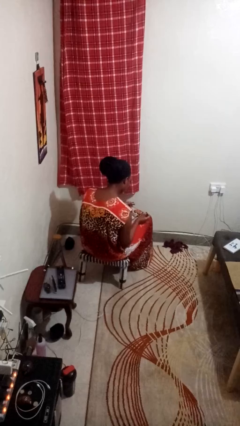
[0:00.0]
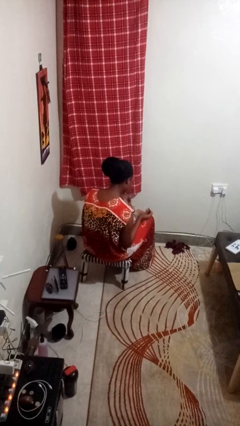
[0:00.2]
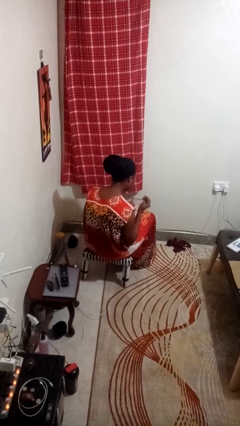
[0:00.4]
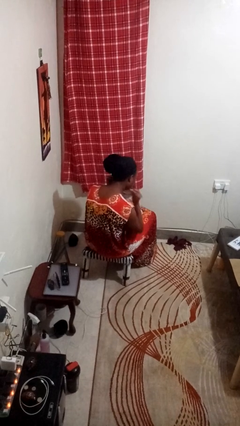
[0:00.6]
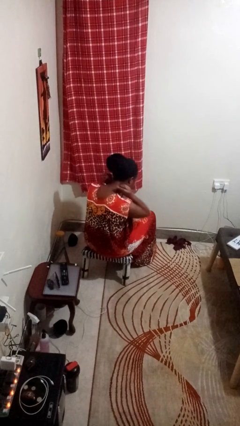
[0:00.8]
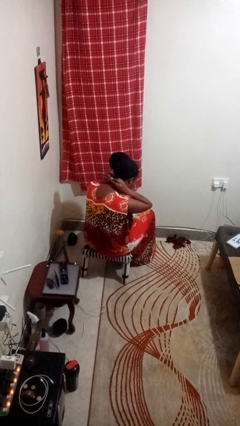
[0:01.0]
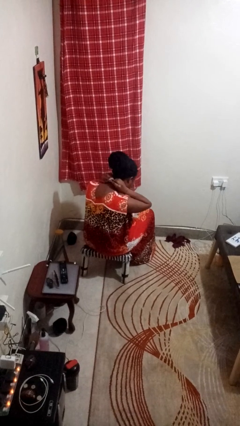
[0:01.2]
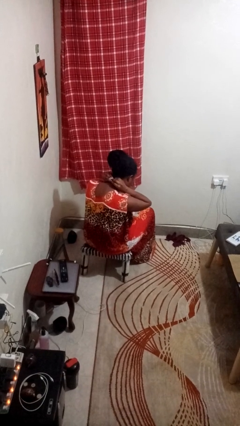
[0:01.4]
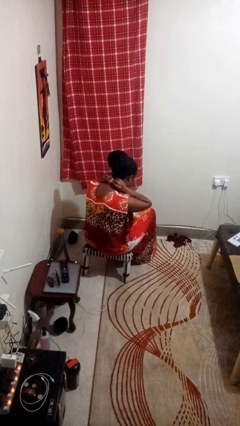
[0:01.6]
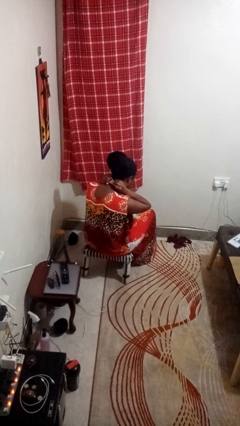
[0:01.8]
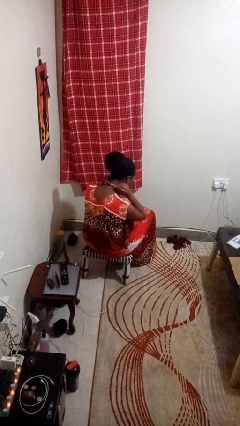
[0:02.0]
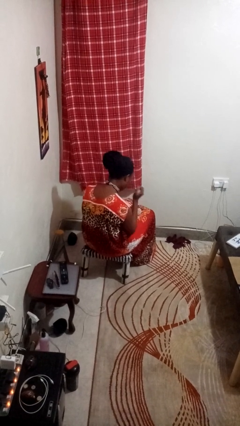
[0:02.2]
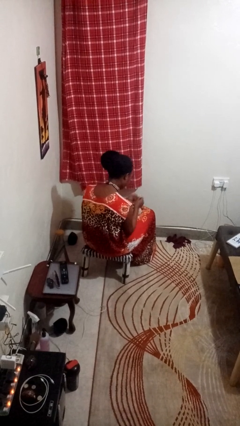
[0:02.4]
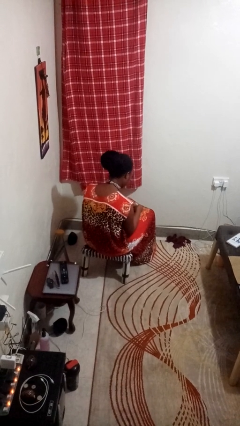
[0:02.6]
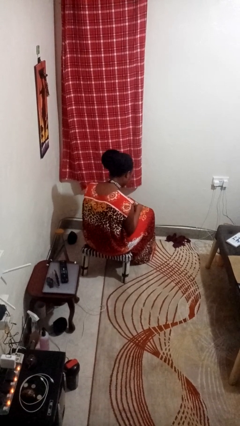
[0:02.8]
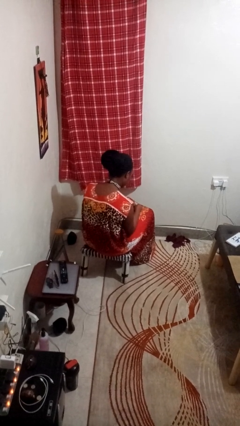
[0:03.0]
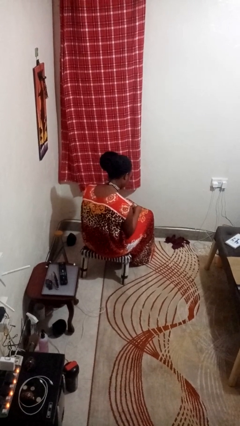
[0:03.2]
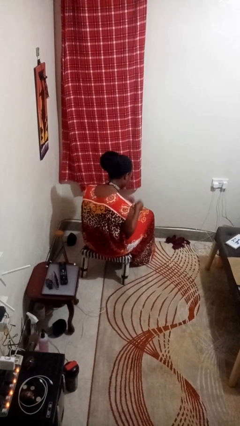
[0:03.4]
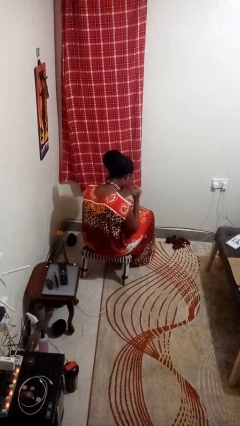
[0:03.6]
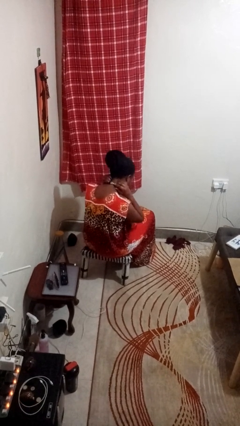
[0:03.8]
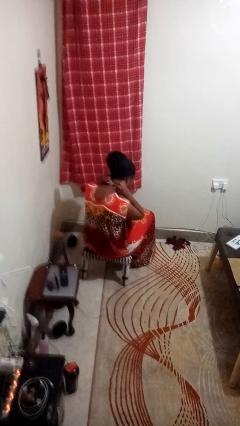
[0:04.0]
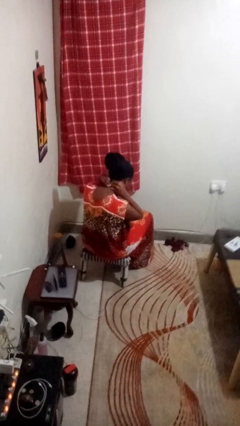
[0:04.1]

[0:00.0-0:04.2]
person puts on necklace

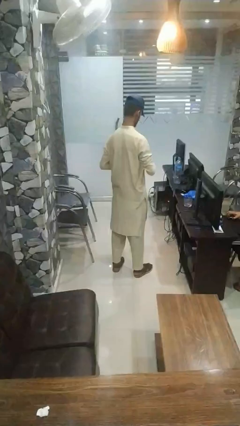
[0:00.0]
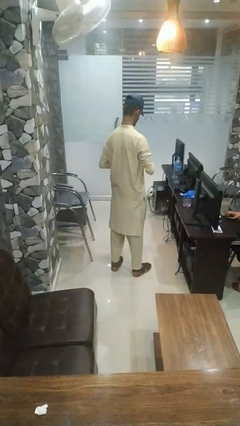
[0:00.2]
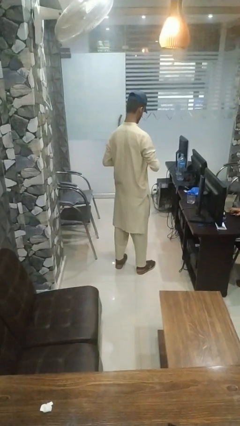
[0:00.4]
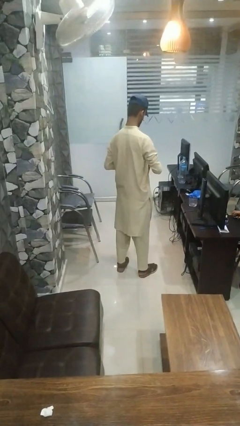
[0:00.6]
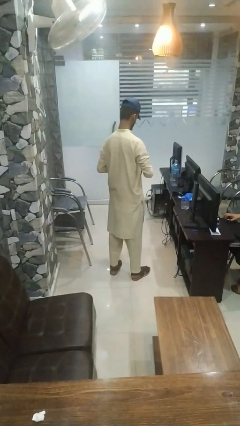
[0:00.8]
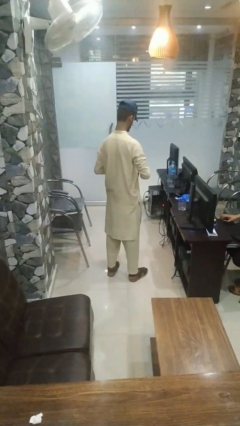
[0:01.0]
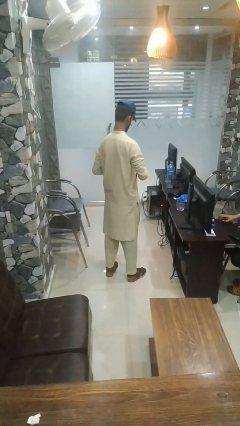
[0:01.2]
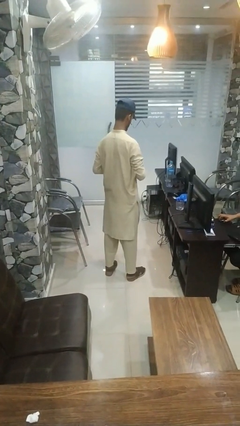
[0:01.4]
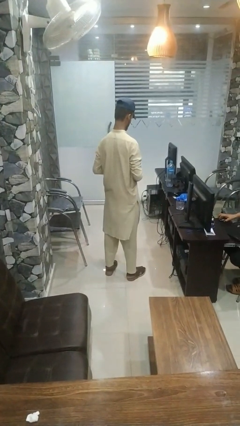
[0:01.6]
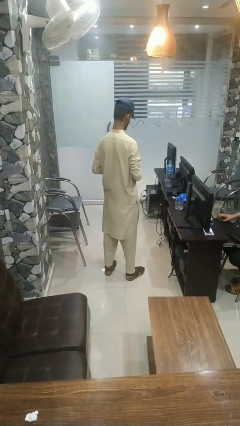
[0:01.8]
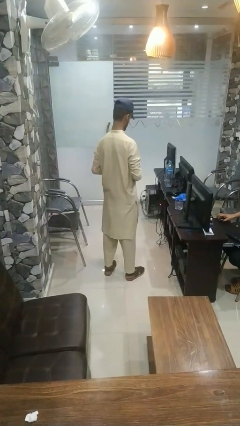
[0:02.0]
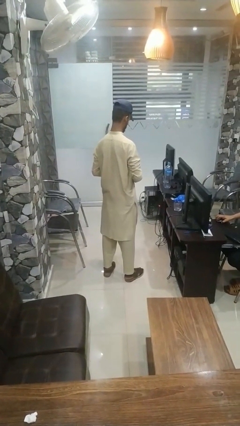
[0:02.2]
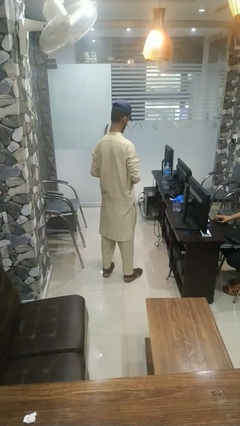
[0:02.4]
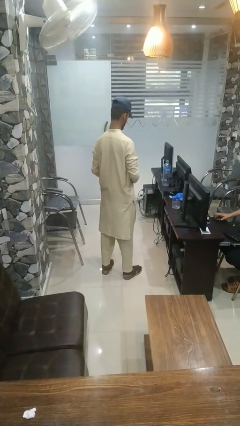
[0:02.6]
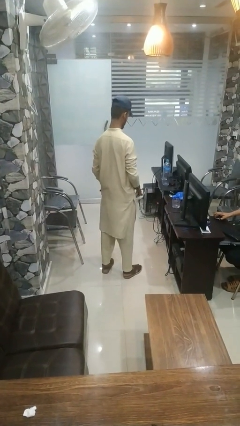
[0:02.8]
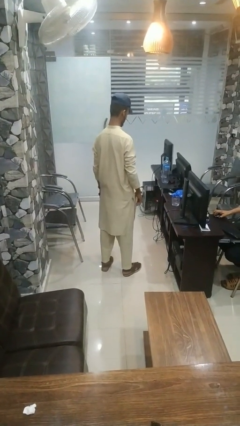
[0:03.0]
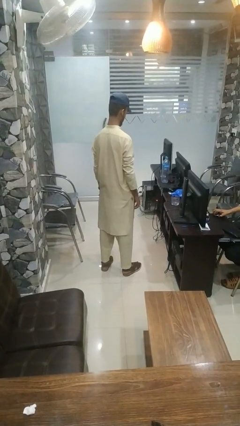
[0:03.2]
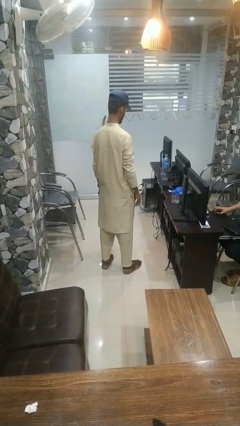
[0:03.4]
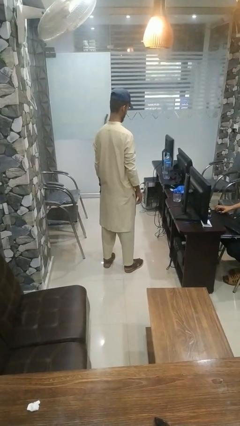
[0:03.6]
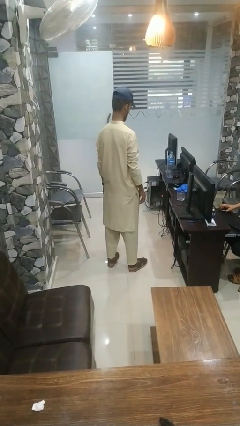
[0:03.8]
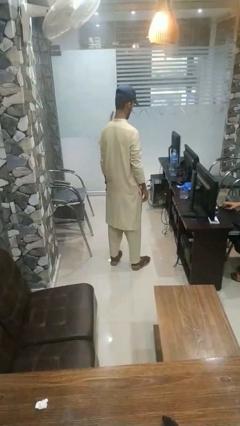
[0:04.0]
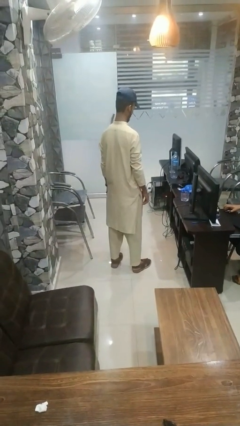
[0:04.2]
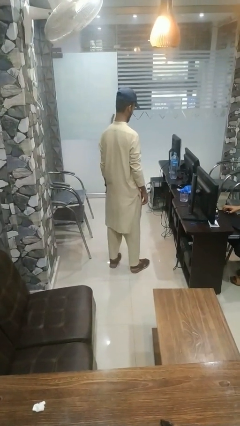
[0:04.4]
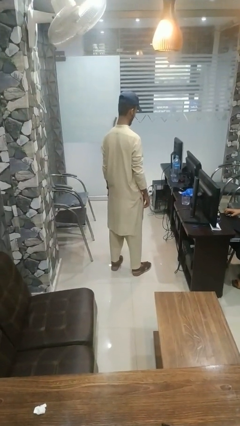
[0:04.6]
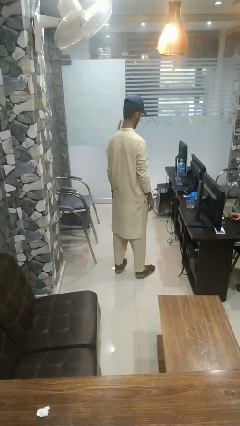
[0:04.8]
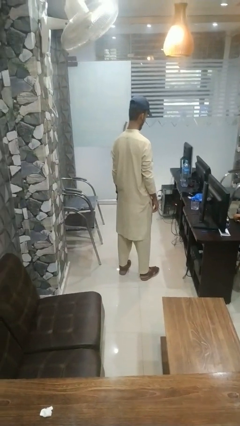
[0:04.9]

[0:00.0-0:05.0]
person puts object into purse

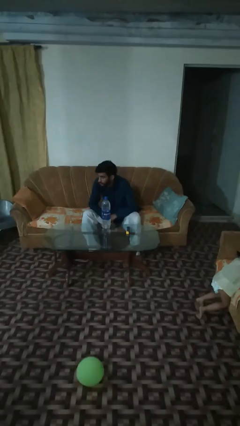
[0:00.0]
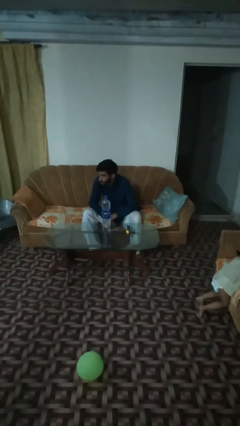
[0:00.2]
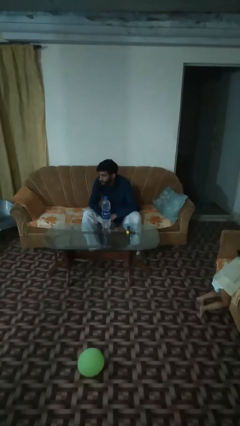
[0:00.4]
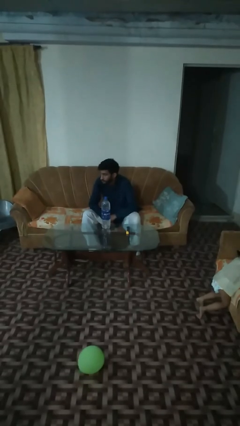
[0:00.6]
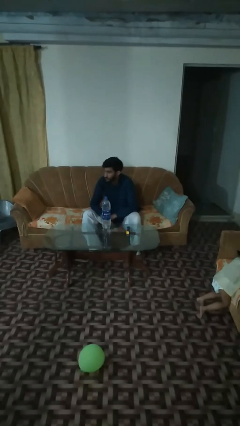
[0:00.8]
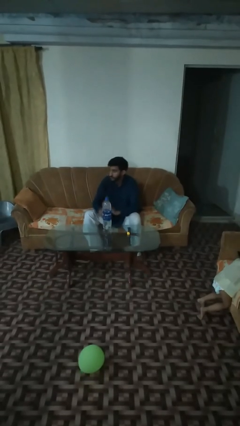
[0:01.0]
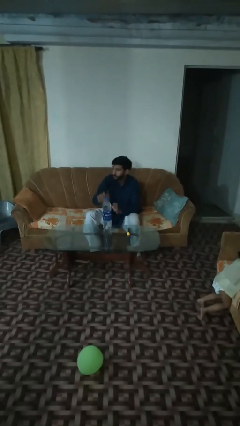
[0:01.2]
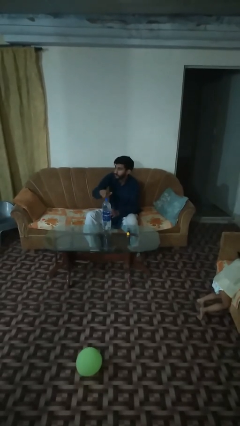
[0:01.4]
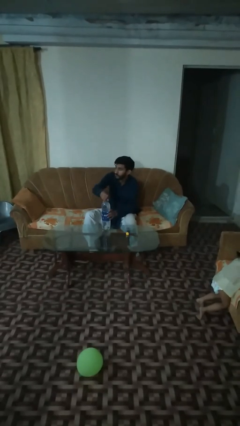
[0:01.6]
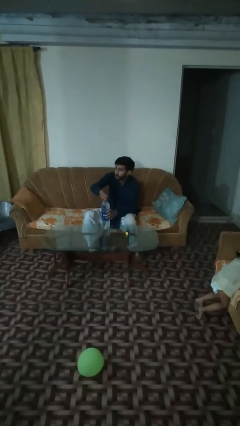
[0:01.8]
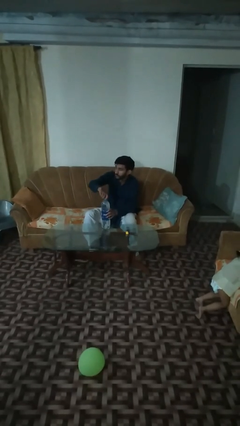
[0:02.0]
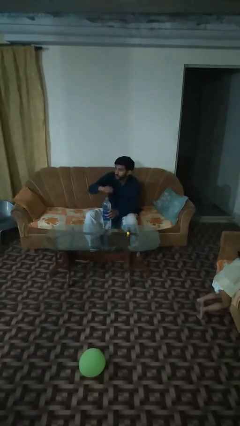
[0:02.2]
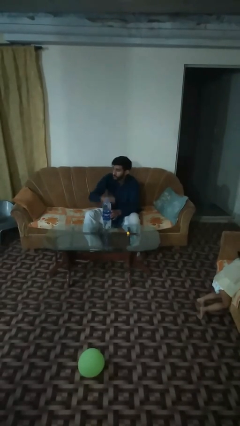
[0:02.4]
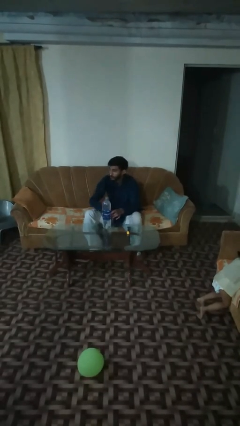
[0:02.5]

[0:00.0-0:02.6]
person unscrews lid from bottle

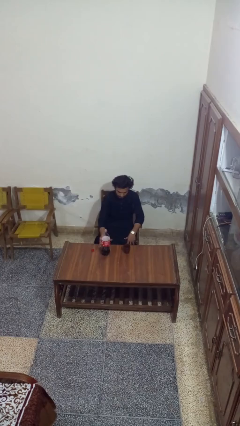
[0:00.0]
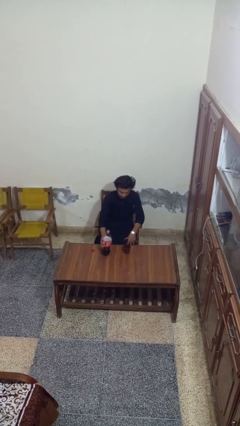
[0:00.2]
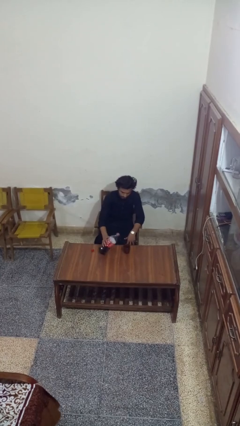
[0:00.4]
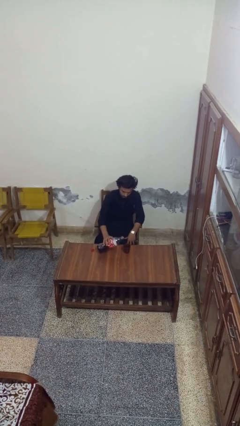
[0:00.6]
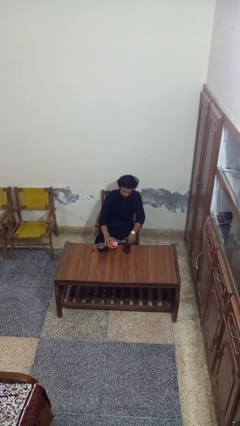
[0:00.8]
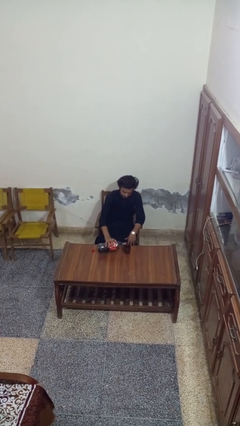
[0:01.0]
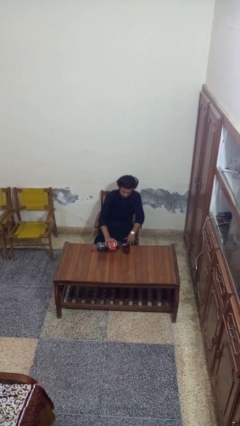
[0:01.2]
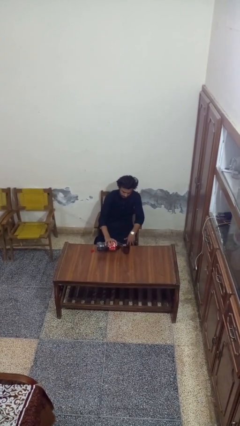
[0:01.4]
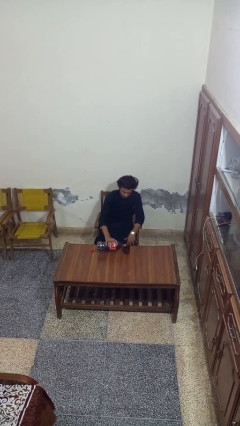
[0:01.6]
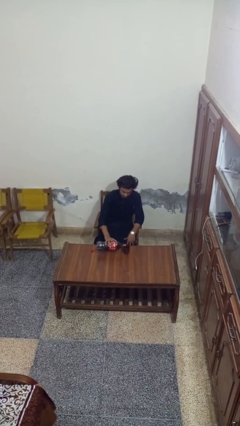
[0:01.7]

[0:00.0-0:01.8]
person pours liquid into cup

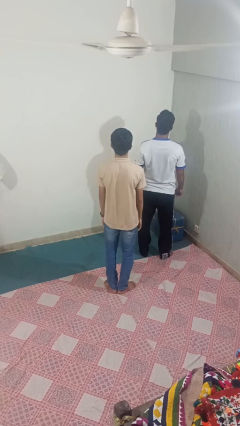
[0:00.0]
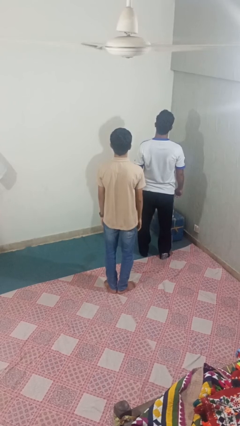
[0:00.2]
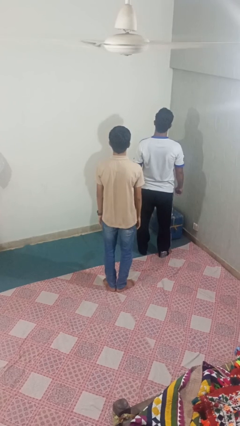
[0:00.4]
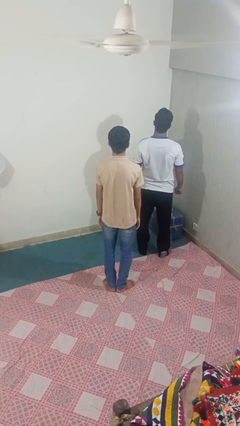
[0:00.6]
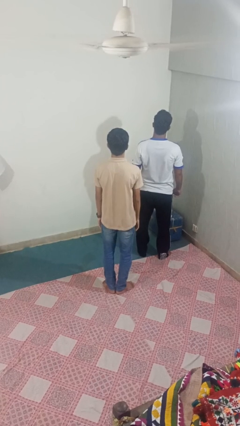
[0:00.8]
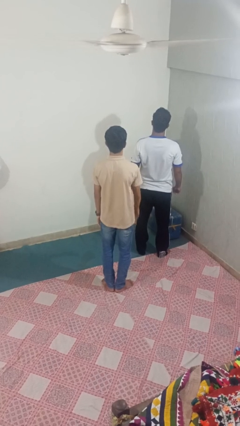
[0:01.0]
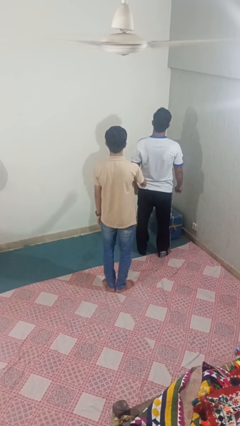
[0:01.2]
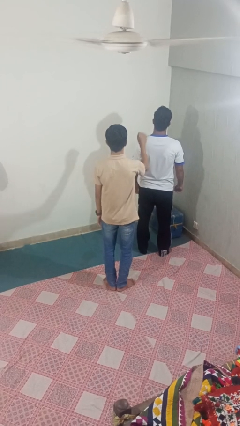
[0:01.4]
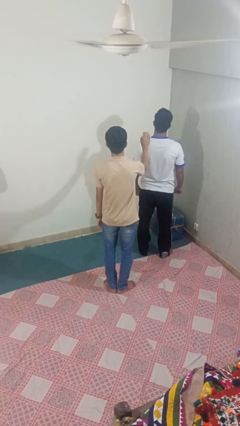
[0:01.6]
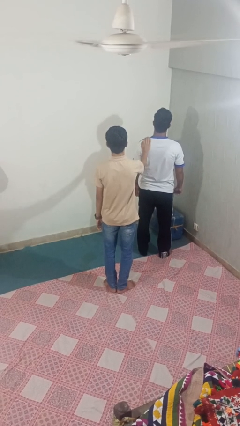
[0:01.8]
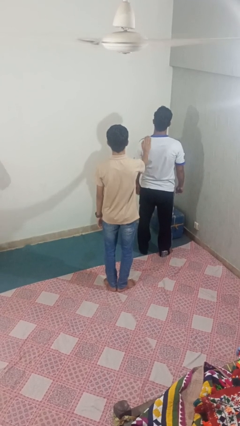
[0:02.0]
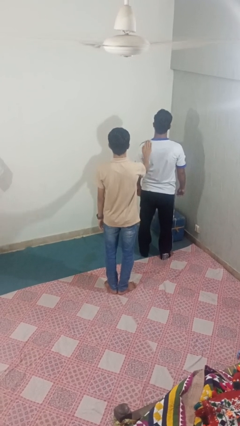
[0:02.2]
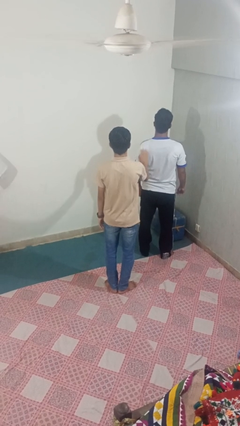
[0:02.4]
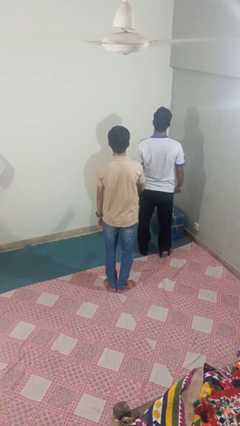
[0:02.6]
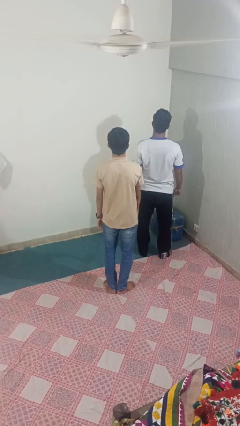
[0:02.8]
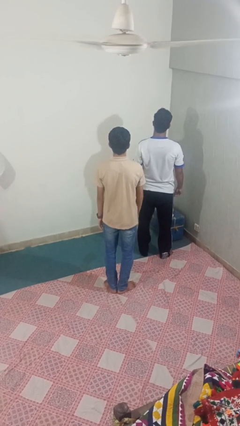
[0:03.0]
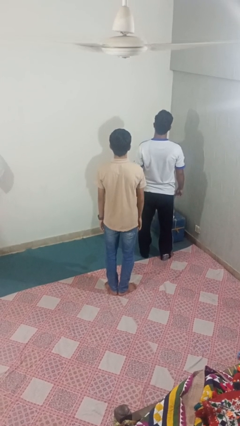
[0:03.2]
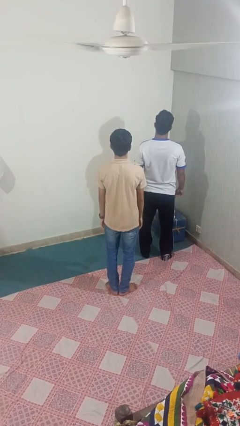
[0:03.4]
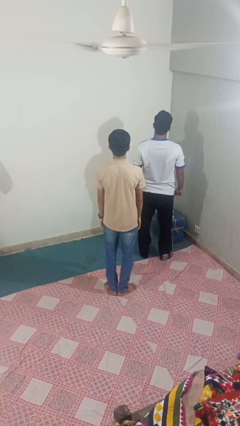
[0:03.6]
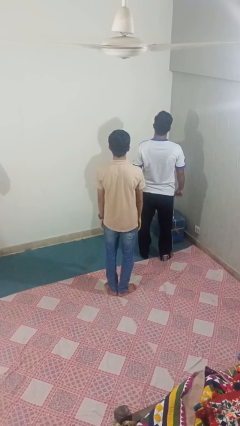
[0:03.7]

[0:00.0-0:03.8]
person touches back of person
